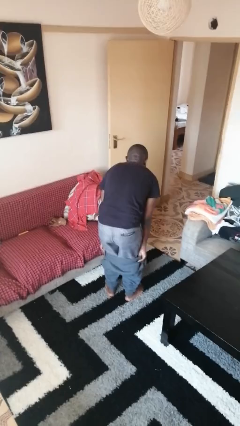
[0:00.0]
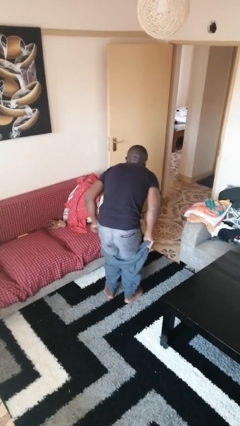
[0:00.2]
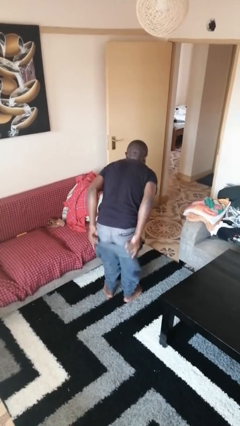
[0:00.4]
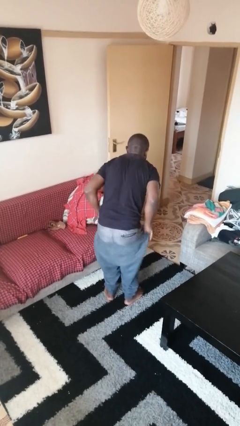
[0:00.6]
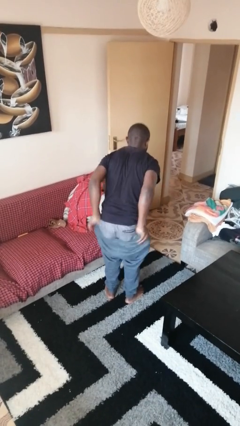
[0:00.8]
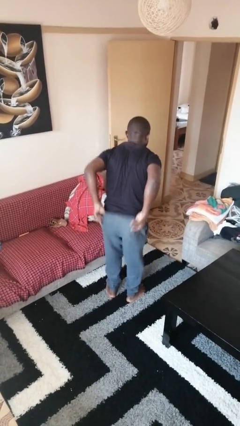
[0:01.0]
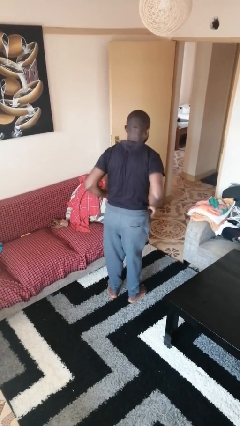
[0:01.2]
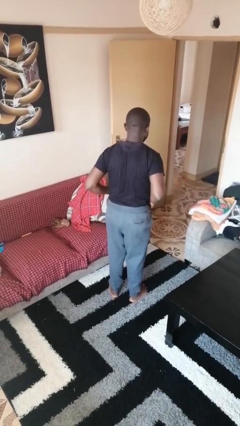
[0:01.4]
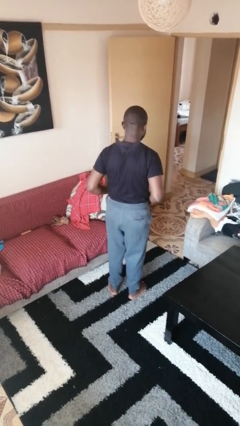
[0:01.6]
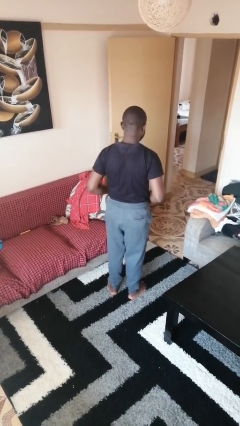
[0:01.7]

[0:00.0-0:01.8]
person puts on pants

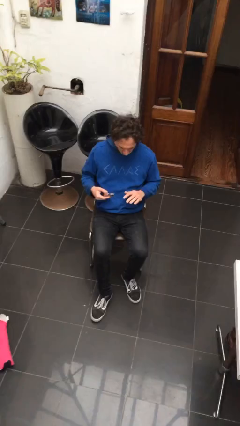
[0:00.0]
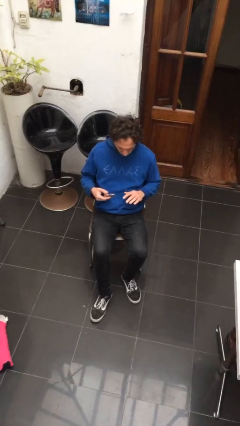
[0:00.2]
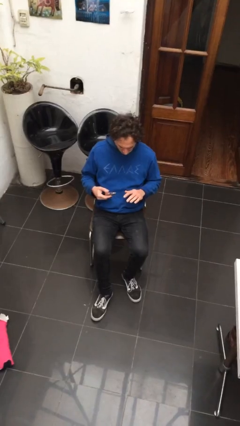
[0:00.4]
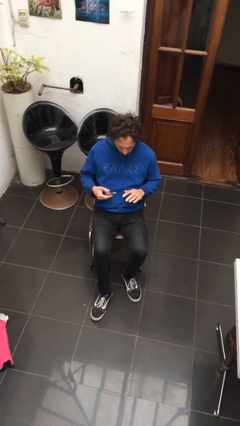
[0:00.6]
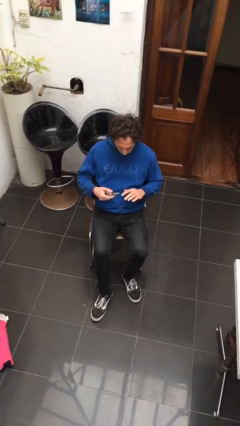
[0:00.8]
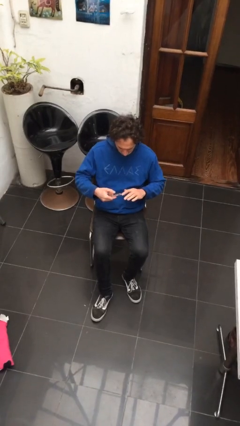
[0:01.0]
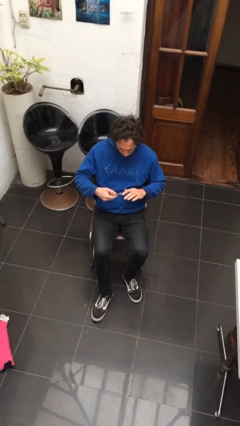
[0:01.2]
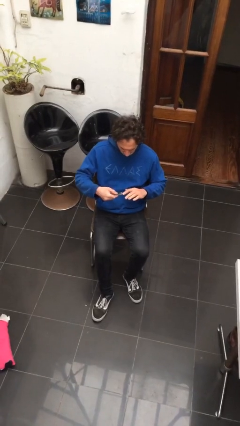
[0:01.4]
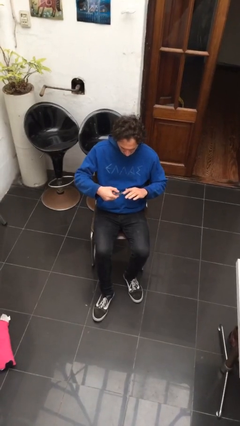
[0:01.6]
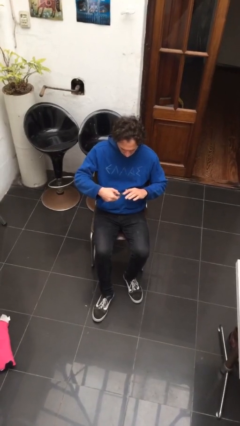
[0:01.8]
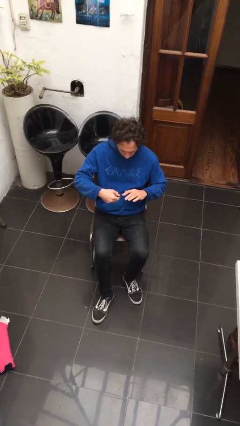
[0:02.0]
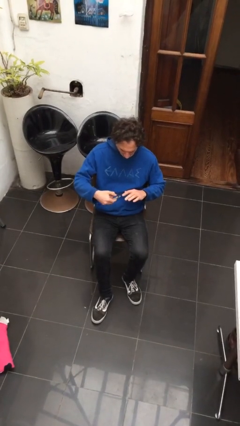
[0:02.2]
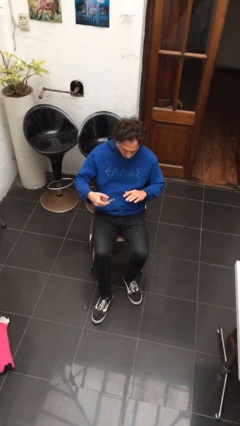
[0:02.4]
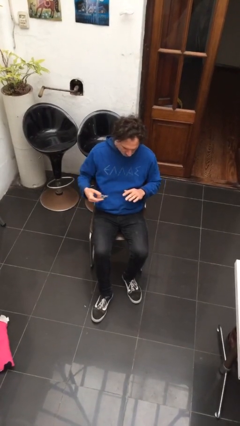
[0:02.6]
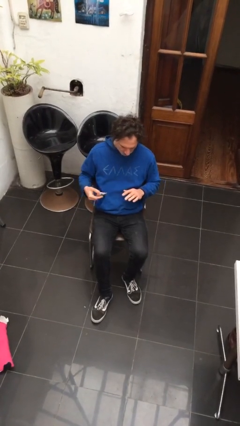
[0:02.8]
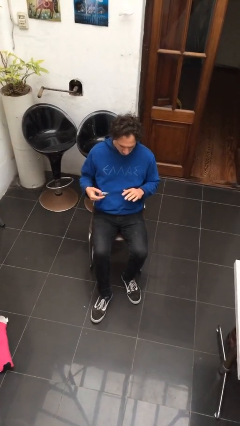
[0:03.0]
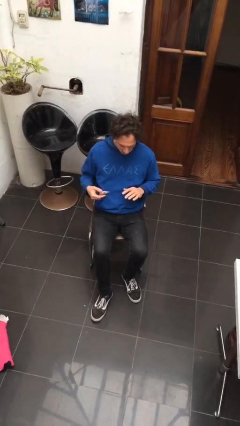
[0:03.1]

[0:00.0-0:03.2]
person clips fingernails

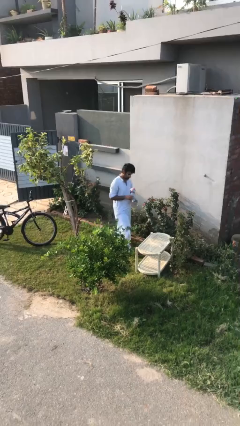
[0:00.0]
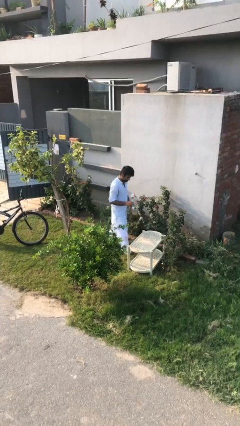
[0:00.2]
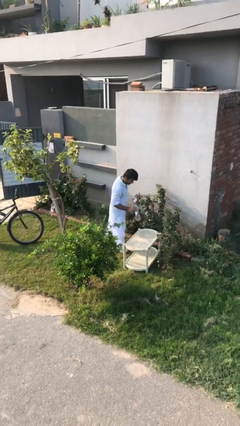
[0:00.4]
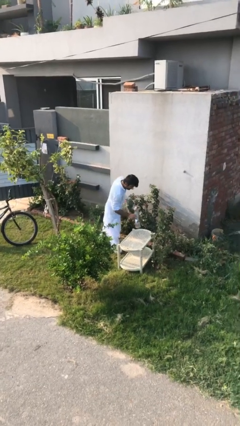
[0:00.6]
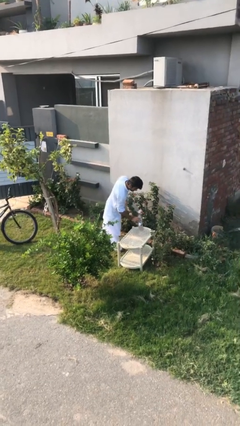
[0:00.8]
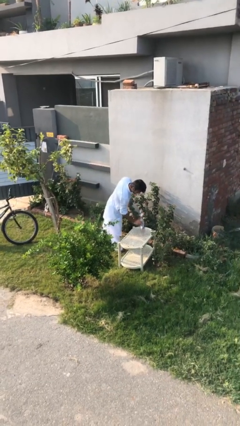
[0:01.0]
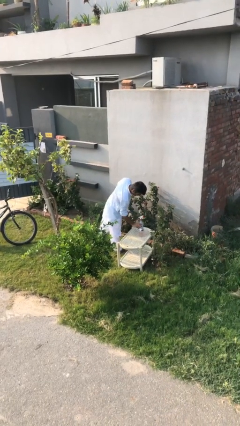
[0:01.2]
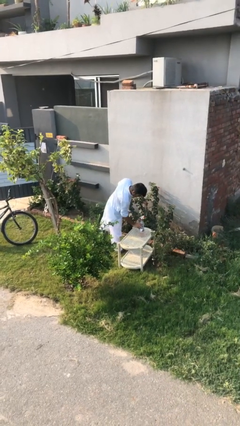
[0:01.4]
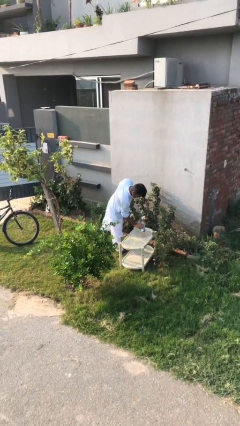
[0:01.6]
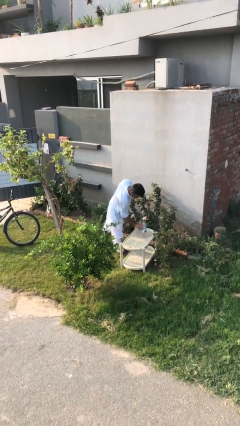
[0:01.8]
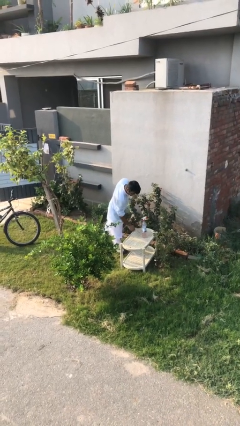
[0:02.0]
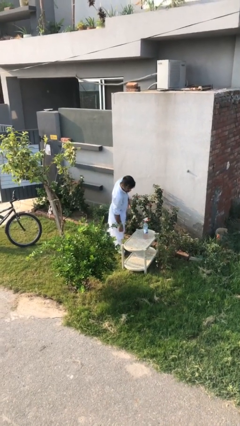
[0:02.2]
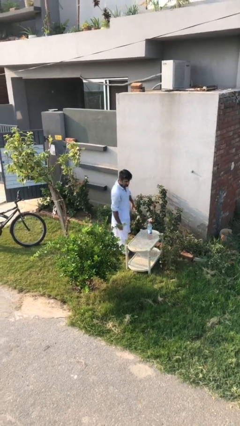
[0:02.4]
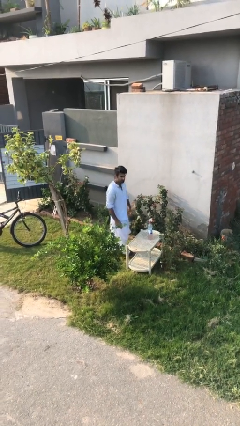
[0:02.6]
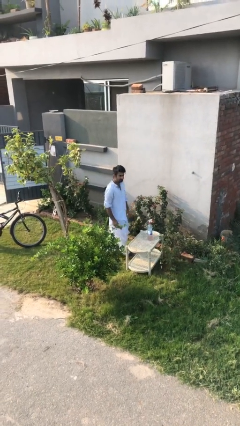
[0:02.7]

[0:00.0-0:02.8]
person puts down object on table

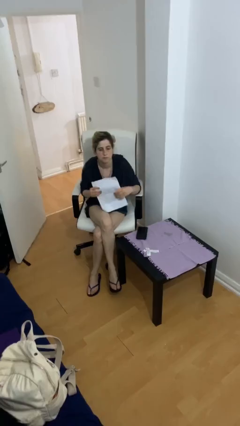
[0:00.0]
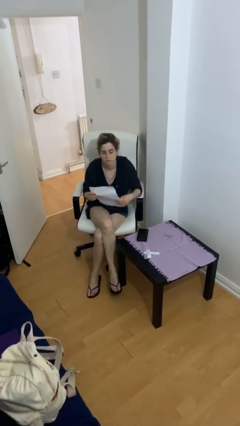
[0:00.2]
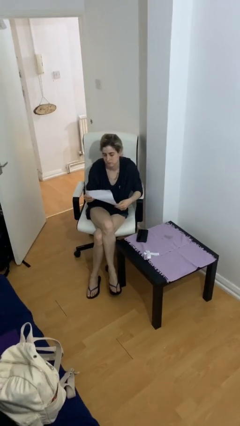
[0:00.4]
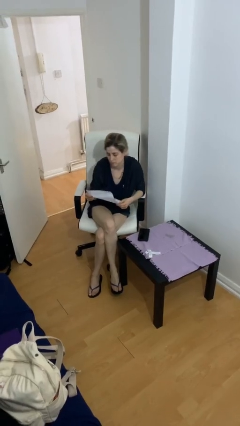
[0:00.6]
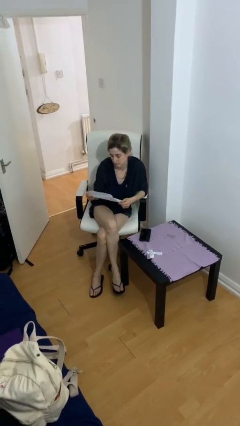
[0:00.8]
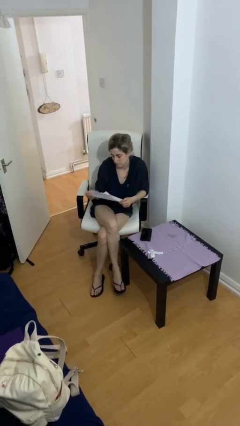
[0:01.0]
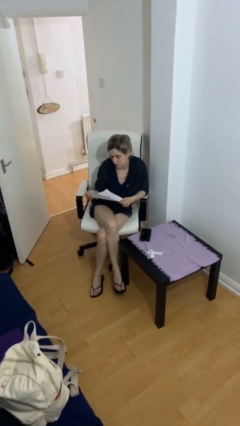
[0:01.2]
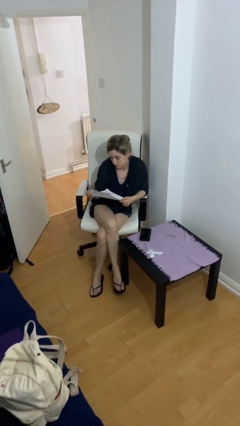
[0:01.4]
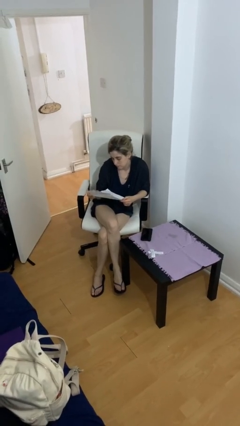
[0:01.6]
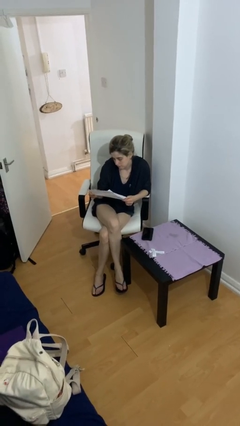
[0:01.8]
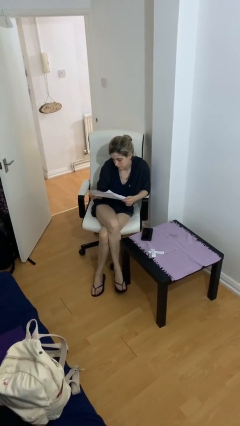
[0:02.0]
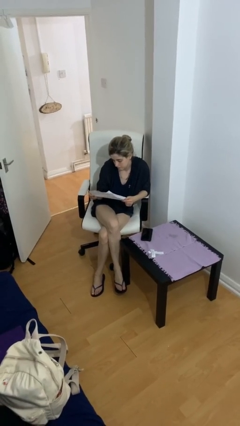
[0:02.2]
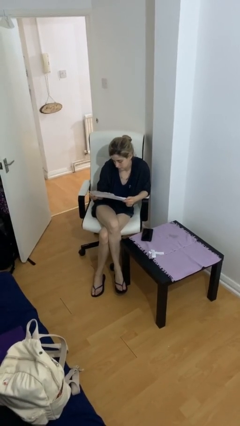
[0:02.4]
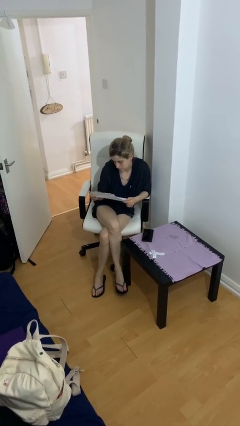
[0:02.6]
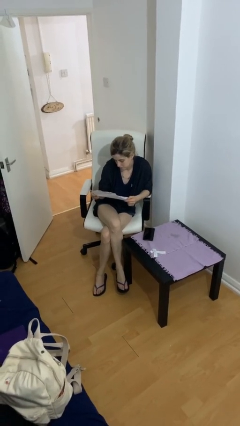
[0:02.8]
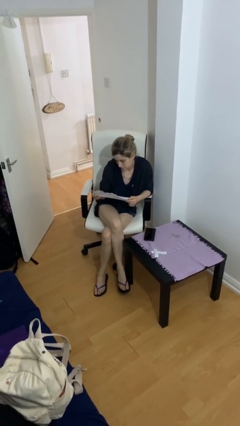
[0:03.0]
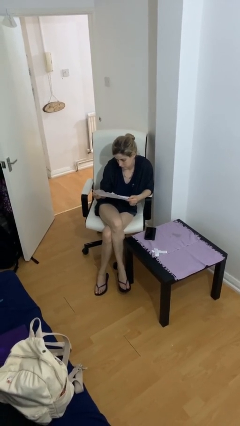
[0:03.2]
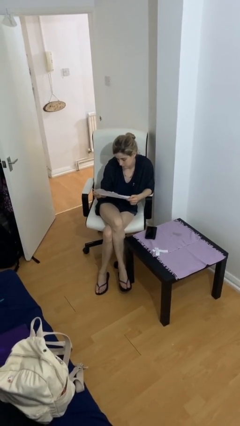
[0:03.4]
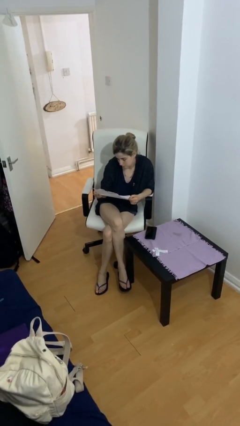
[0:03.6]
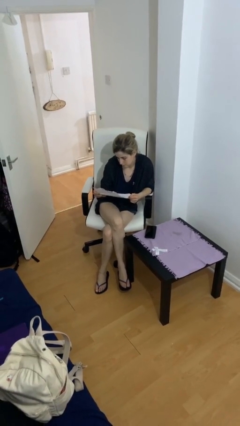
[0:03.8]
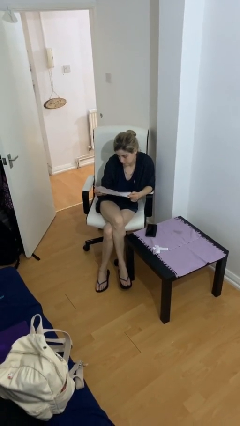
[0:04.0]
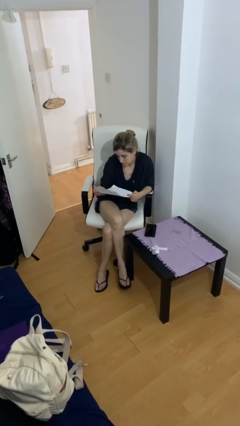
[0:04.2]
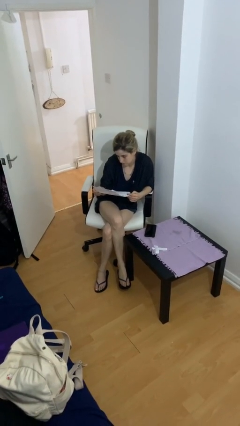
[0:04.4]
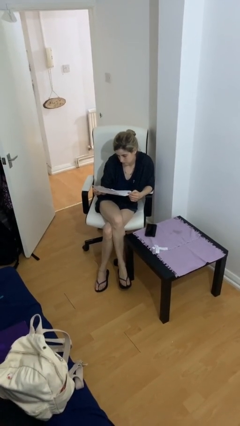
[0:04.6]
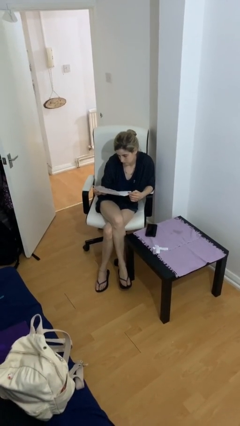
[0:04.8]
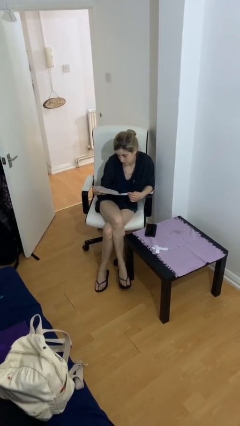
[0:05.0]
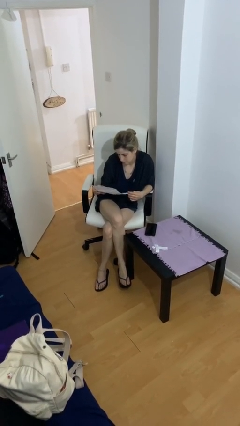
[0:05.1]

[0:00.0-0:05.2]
person reads document

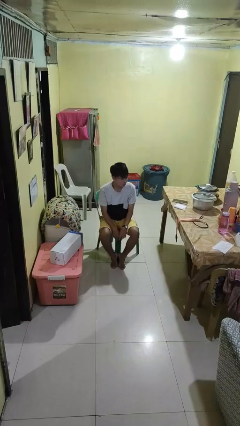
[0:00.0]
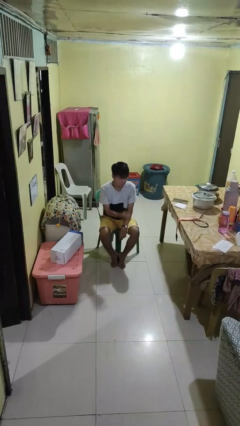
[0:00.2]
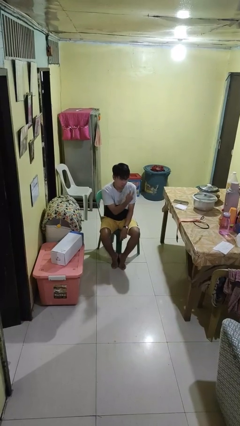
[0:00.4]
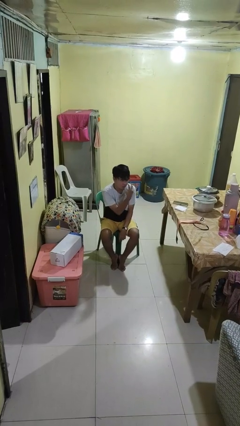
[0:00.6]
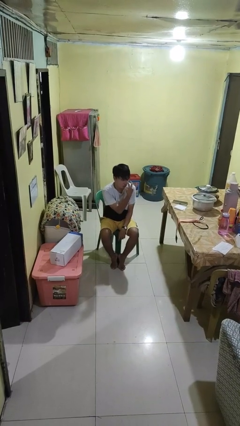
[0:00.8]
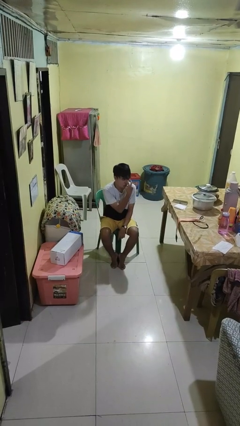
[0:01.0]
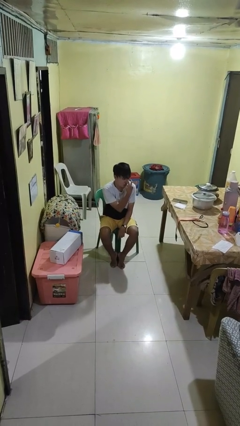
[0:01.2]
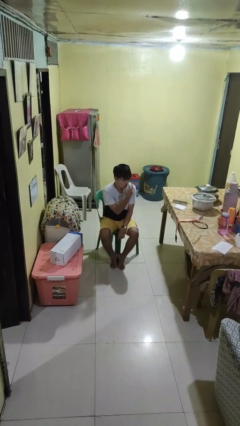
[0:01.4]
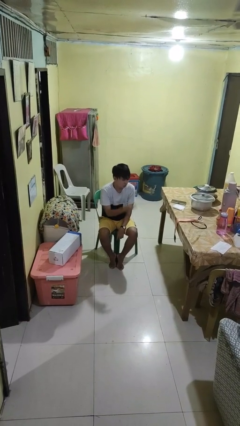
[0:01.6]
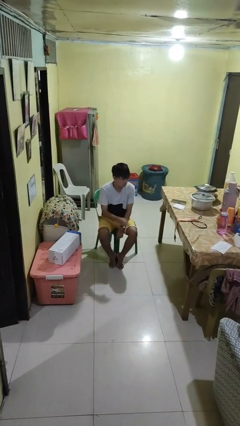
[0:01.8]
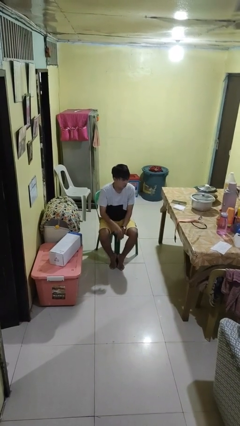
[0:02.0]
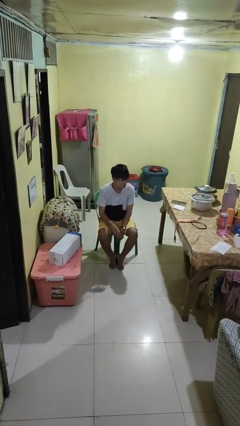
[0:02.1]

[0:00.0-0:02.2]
person gestures watch closely

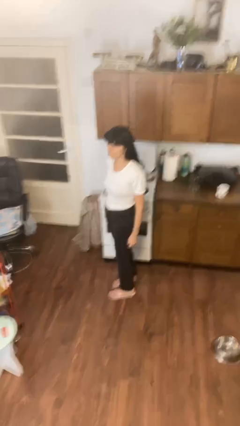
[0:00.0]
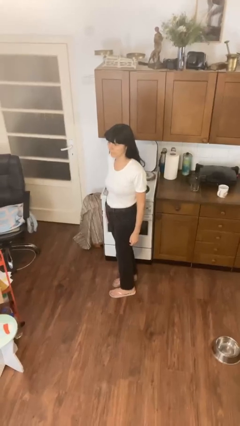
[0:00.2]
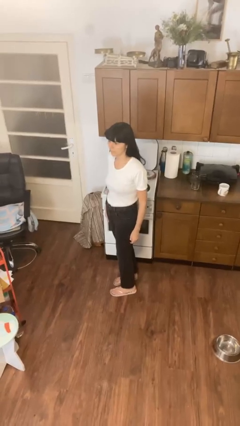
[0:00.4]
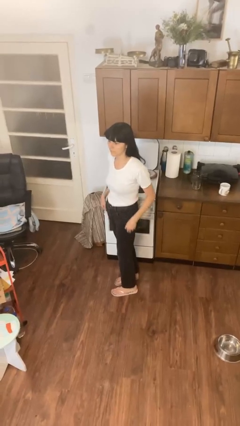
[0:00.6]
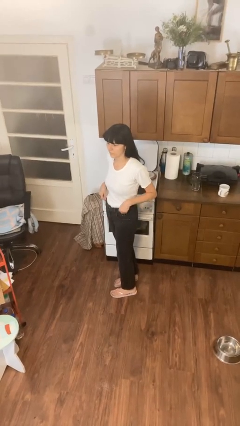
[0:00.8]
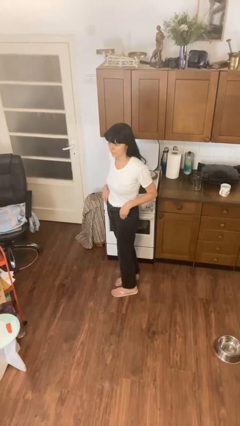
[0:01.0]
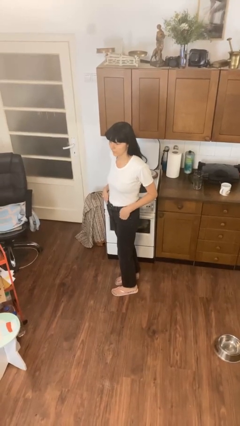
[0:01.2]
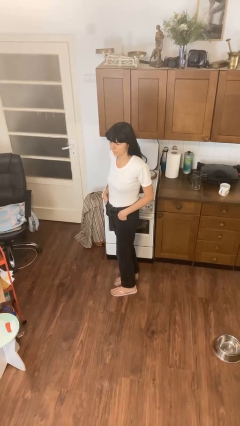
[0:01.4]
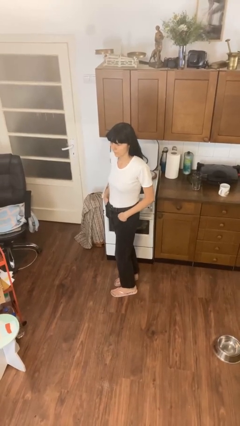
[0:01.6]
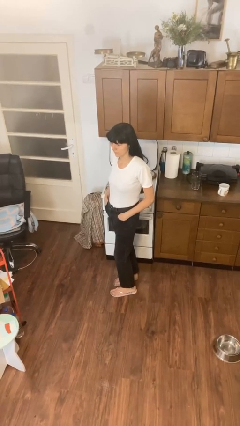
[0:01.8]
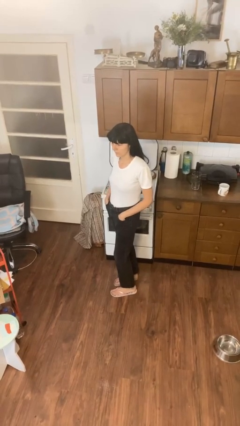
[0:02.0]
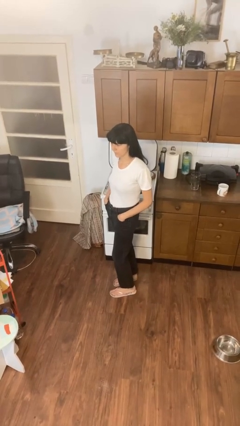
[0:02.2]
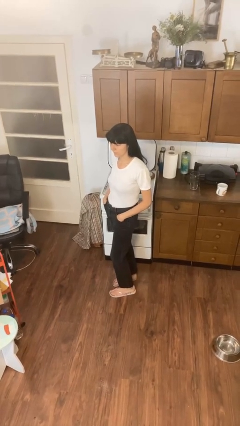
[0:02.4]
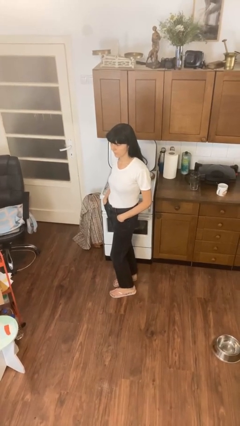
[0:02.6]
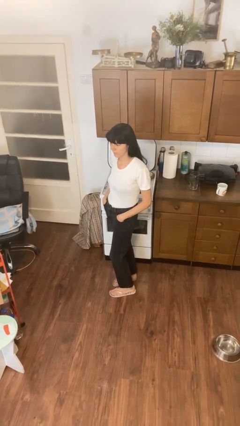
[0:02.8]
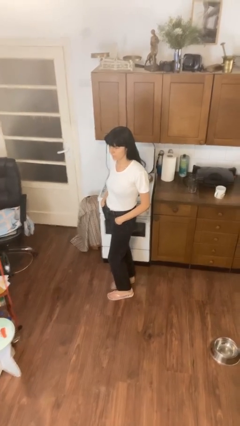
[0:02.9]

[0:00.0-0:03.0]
person puts hands in back pockets
